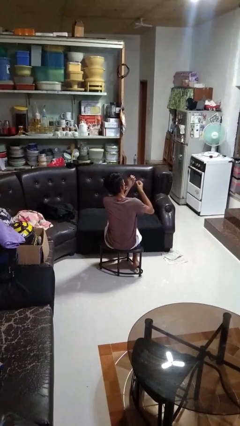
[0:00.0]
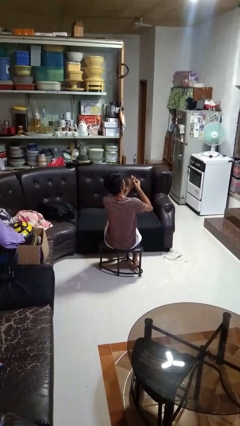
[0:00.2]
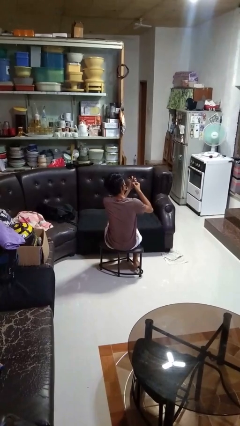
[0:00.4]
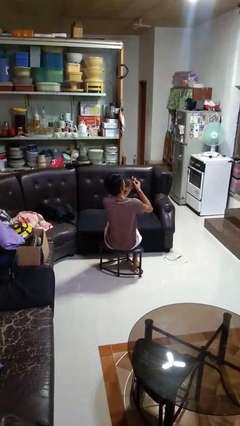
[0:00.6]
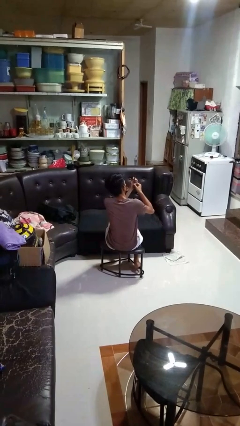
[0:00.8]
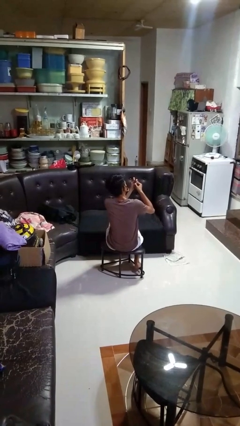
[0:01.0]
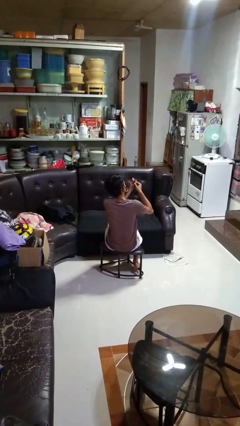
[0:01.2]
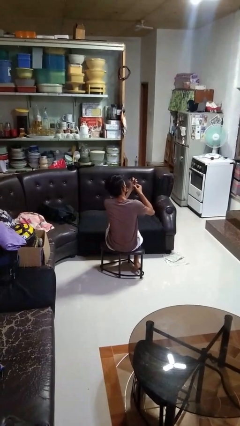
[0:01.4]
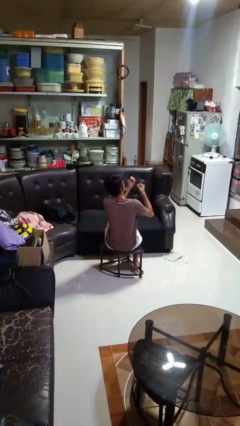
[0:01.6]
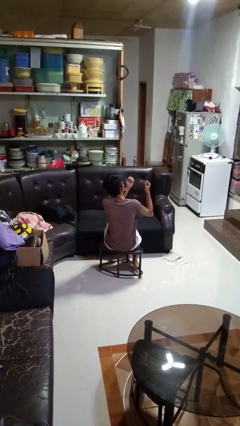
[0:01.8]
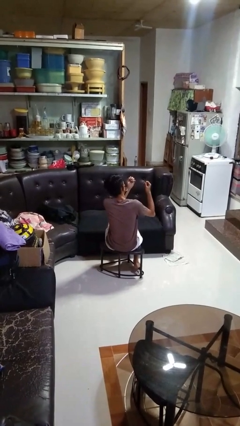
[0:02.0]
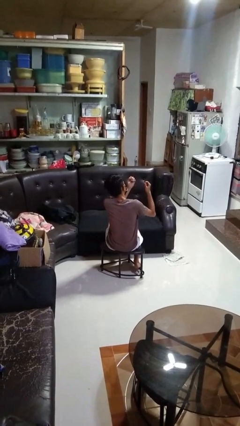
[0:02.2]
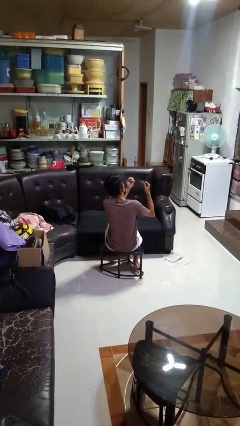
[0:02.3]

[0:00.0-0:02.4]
person files fingernails

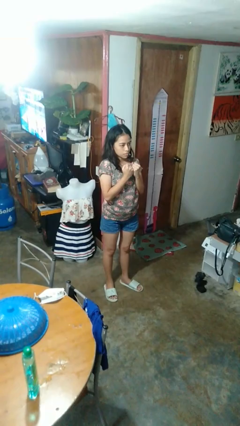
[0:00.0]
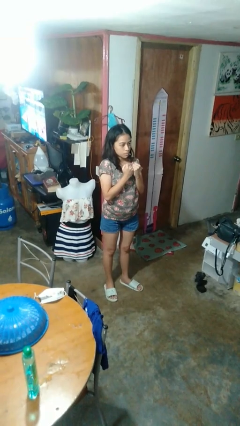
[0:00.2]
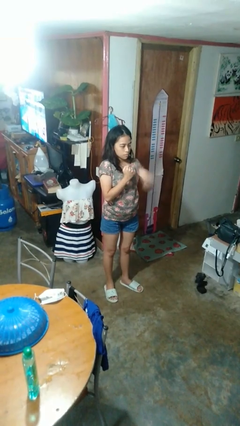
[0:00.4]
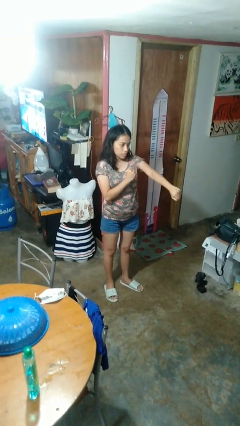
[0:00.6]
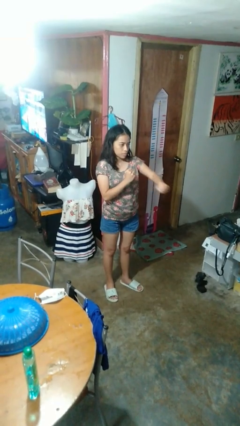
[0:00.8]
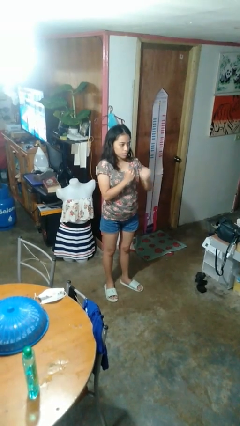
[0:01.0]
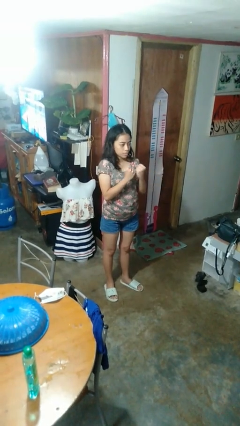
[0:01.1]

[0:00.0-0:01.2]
person punches

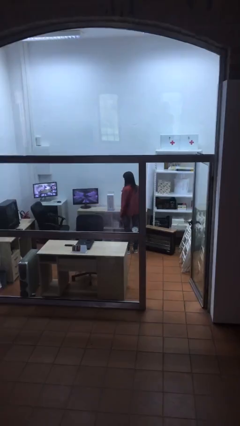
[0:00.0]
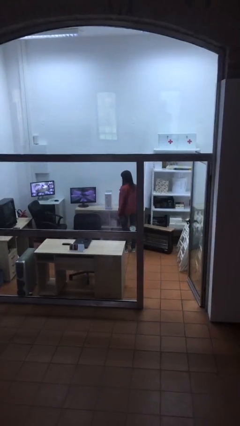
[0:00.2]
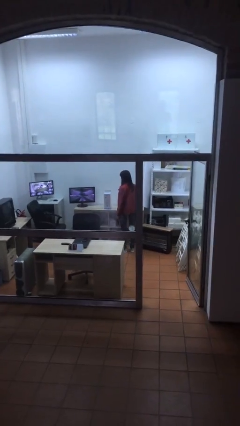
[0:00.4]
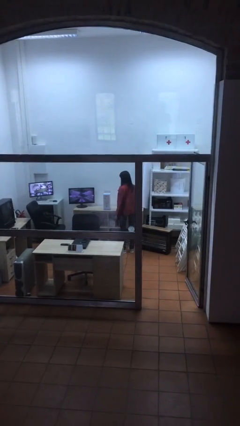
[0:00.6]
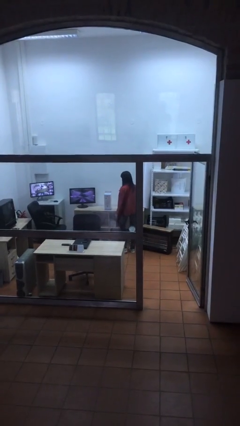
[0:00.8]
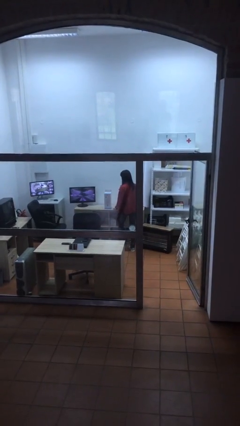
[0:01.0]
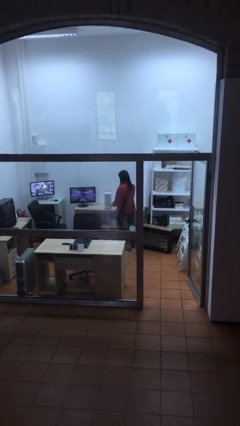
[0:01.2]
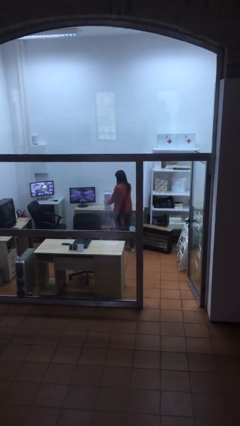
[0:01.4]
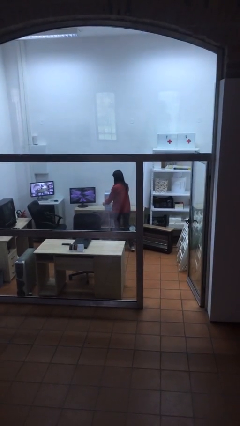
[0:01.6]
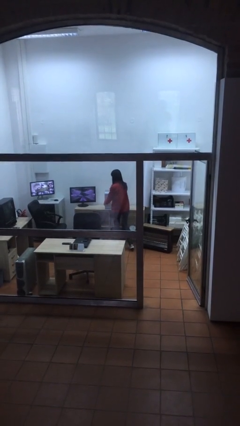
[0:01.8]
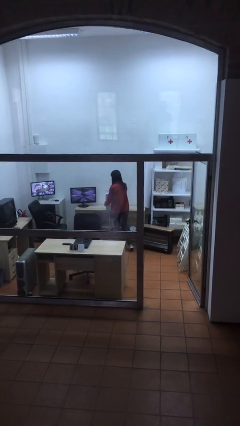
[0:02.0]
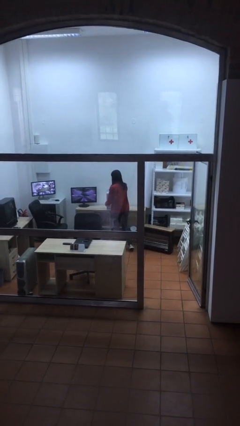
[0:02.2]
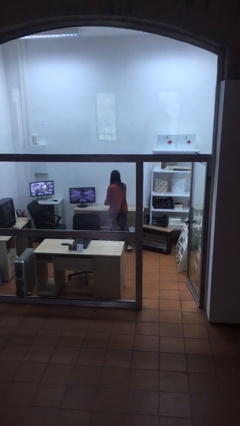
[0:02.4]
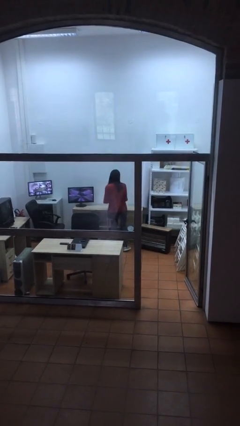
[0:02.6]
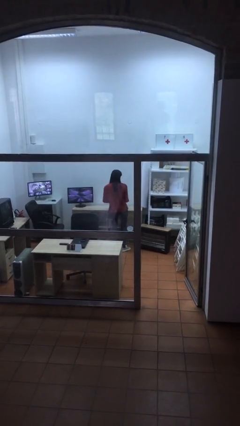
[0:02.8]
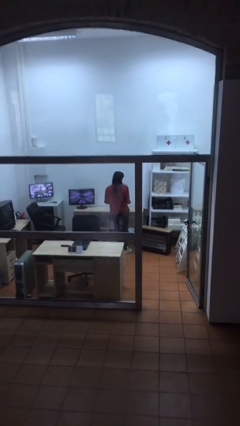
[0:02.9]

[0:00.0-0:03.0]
person picks up object from table

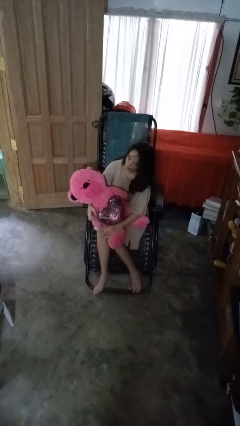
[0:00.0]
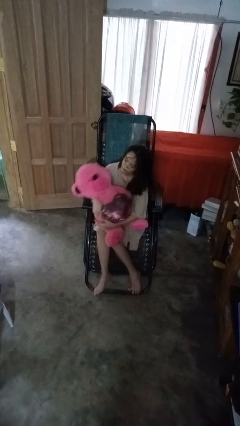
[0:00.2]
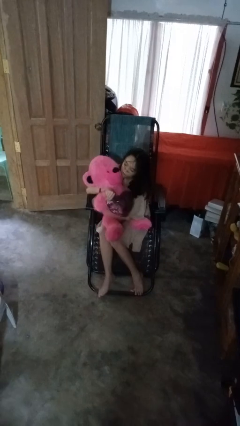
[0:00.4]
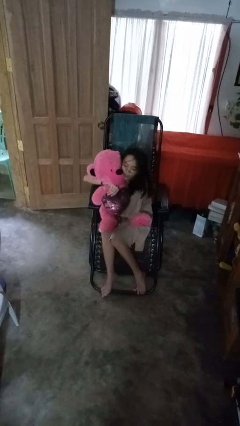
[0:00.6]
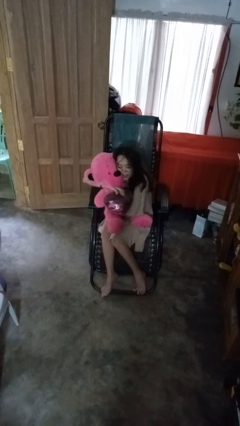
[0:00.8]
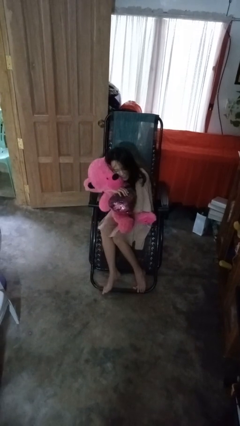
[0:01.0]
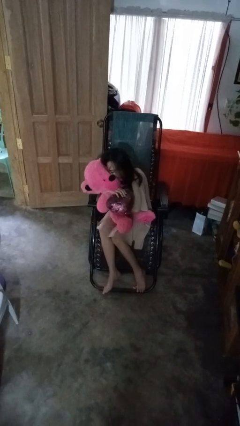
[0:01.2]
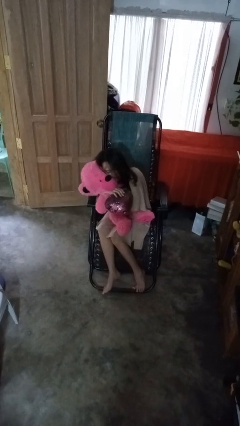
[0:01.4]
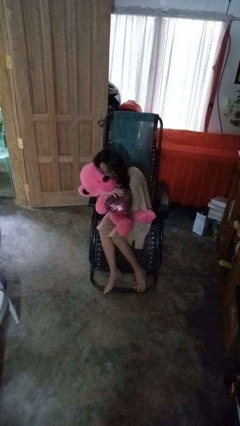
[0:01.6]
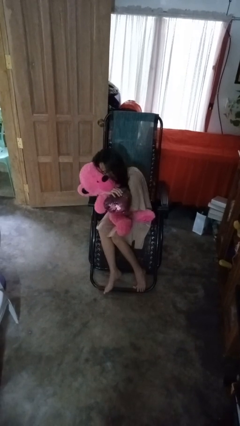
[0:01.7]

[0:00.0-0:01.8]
person hugs stuffed animal

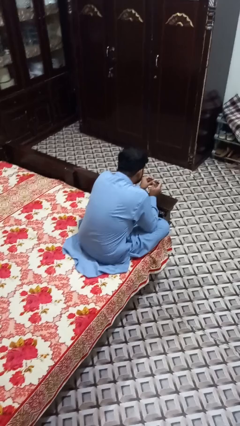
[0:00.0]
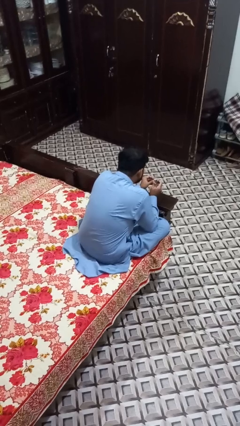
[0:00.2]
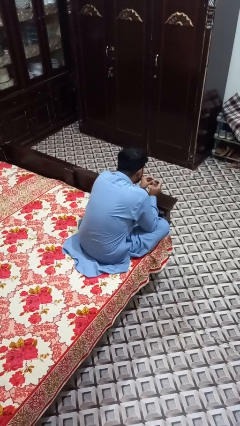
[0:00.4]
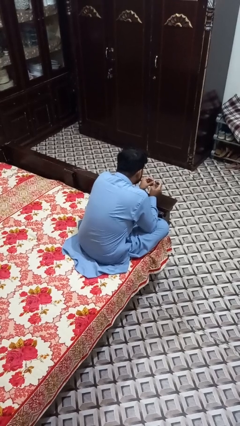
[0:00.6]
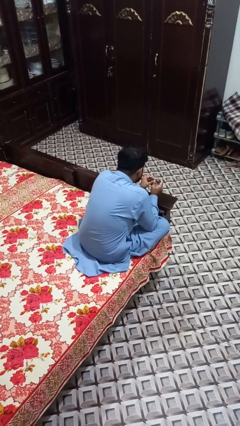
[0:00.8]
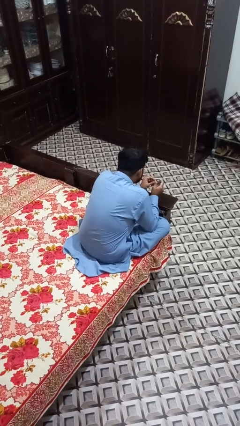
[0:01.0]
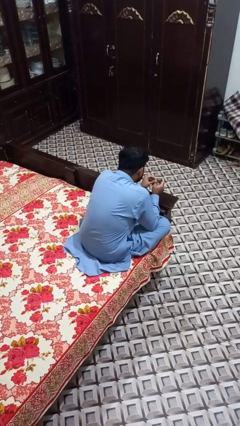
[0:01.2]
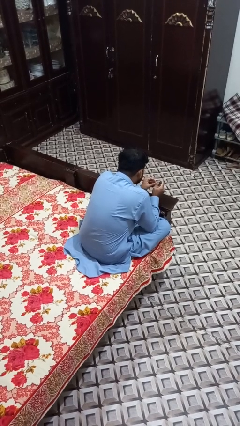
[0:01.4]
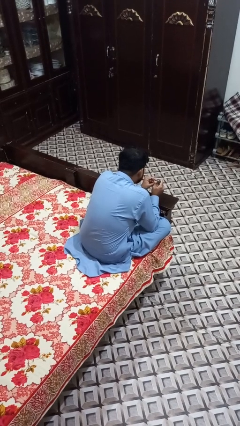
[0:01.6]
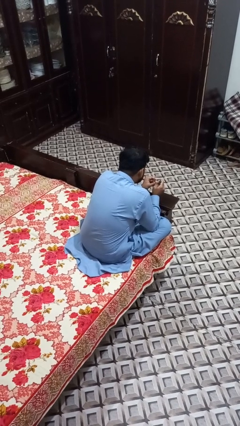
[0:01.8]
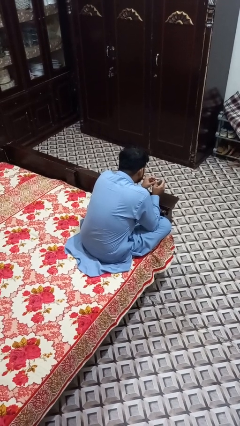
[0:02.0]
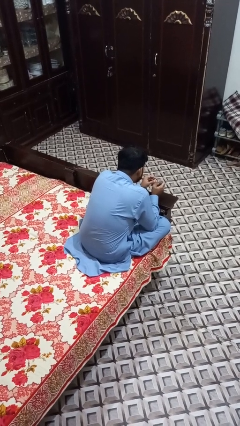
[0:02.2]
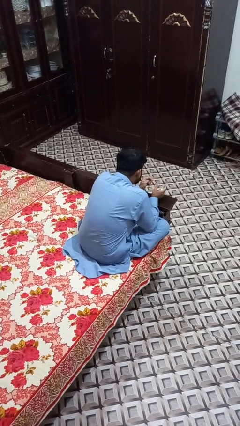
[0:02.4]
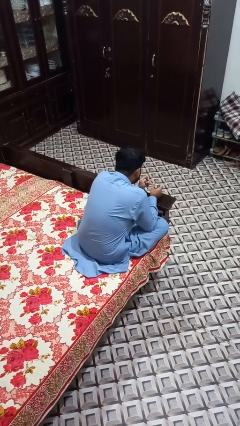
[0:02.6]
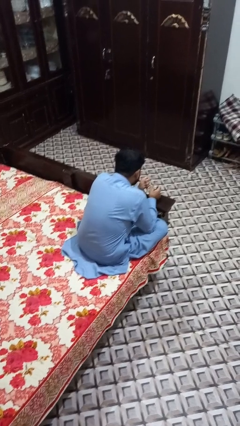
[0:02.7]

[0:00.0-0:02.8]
person clips fingernails

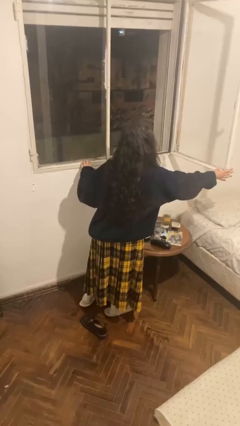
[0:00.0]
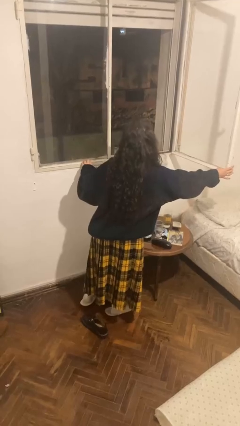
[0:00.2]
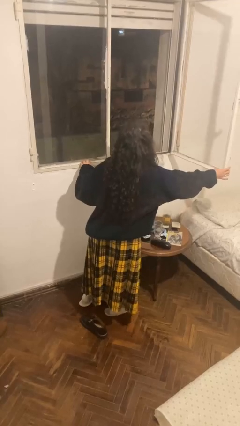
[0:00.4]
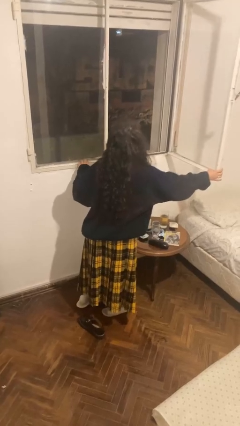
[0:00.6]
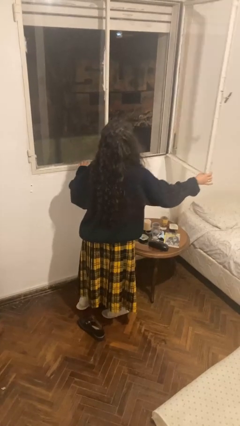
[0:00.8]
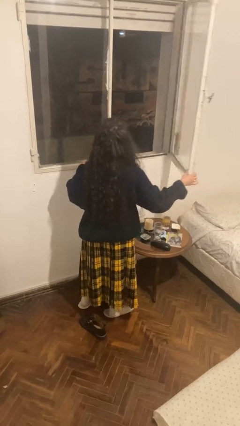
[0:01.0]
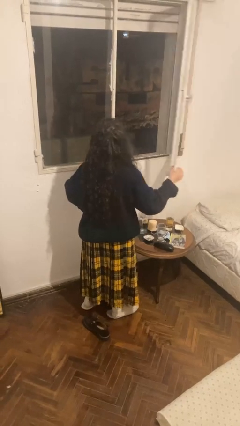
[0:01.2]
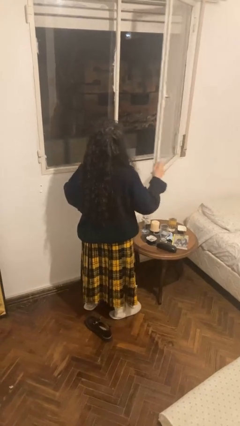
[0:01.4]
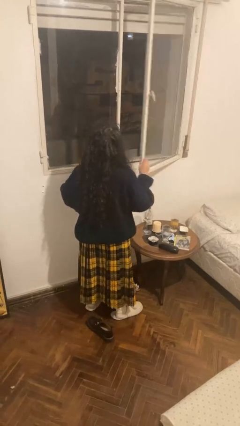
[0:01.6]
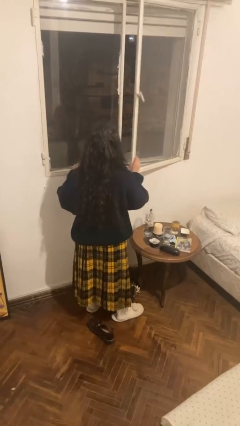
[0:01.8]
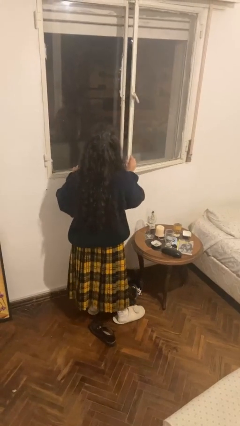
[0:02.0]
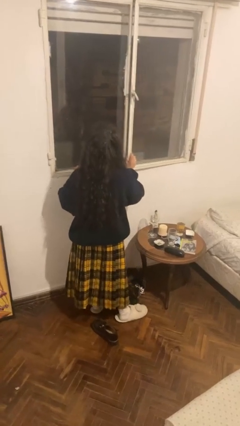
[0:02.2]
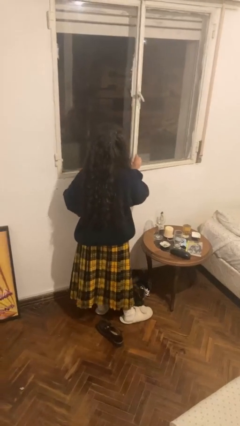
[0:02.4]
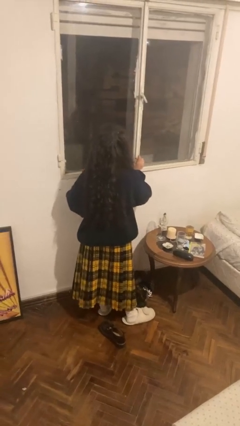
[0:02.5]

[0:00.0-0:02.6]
person closes home window

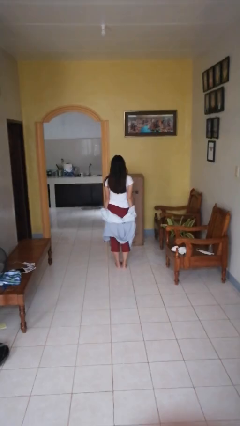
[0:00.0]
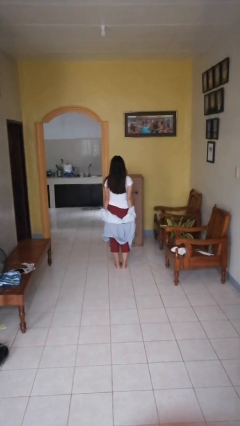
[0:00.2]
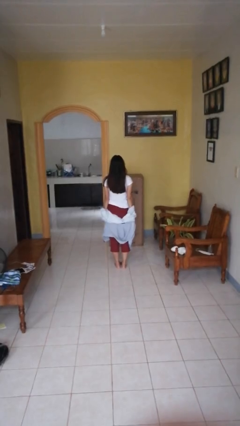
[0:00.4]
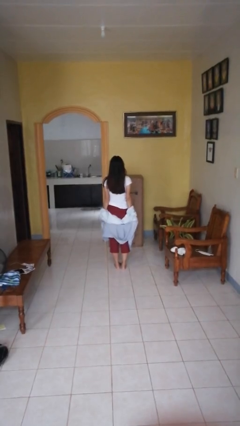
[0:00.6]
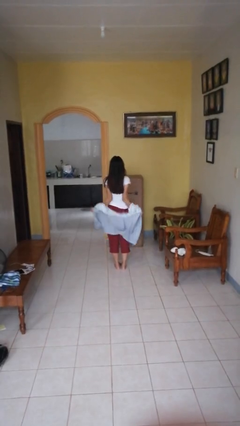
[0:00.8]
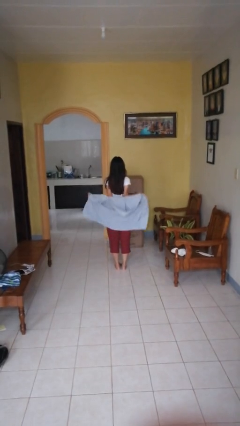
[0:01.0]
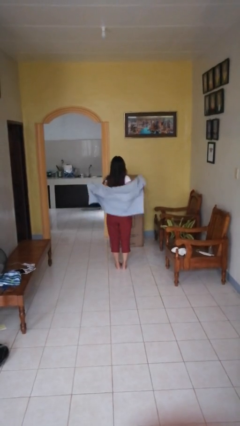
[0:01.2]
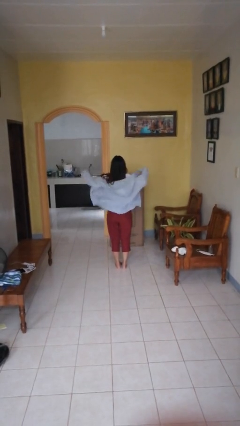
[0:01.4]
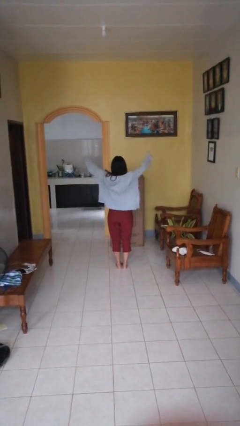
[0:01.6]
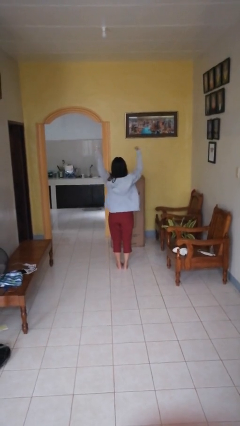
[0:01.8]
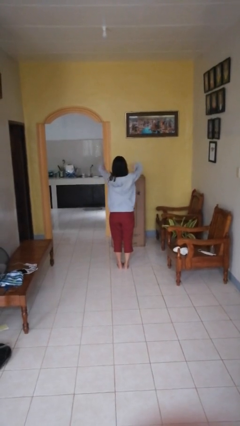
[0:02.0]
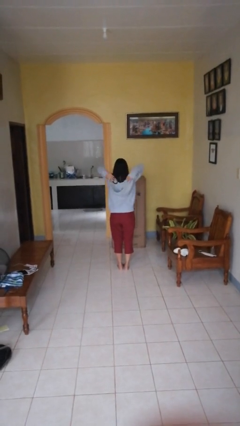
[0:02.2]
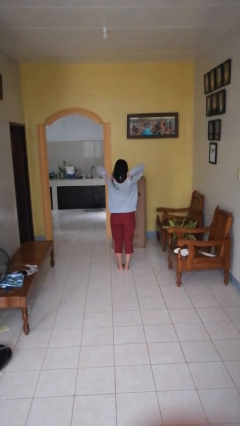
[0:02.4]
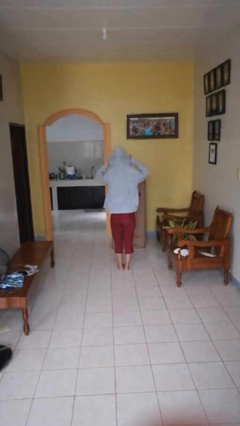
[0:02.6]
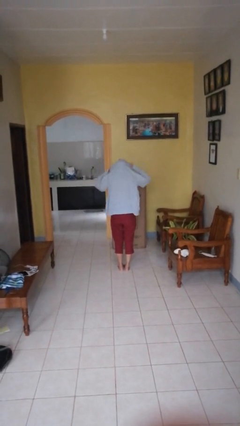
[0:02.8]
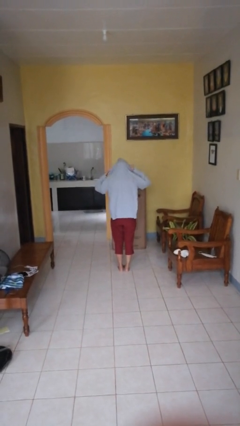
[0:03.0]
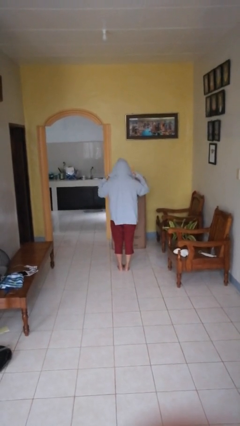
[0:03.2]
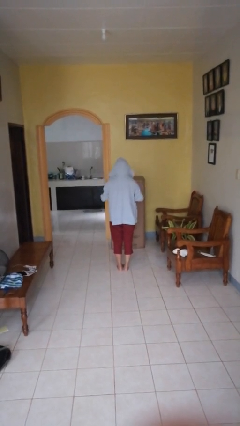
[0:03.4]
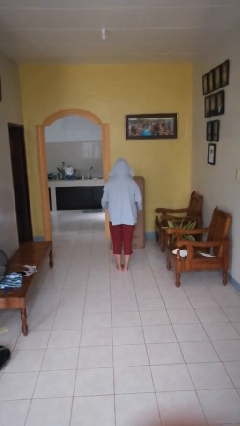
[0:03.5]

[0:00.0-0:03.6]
person puts on hoodie
